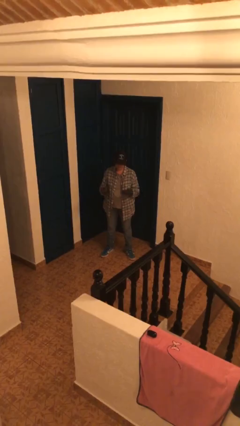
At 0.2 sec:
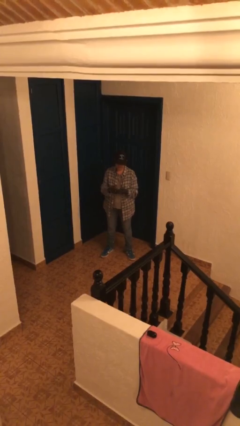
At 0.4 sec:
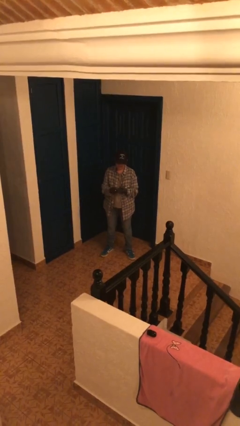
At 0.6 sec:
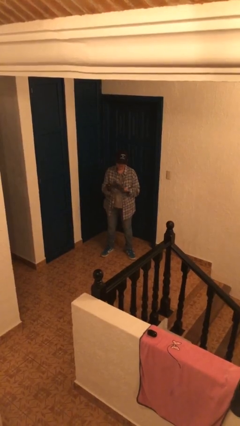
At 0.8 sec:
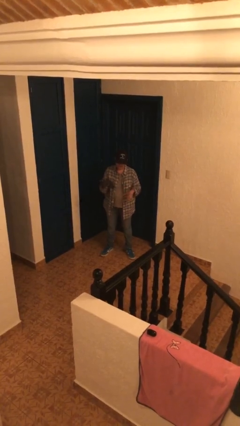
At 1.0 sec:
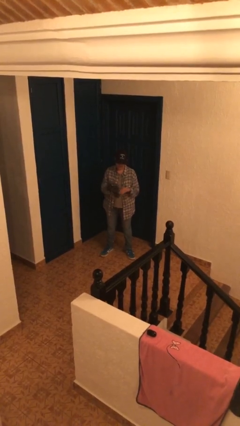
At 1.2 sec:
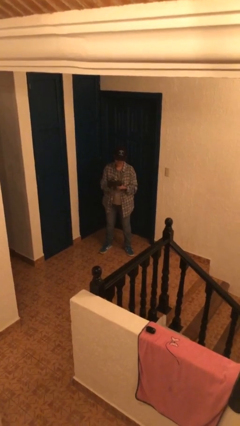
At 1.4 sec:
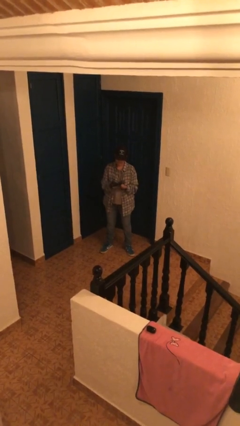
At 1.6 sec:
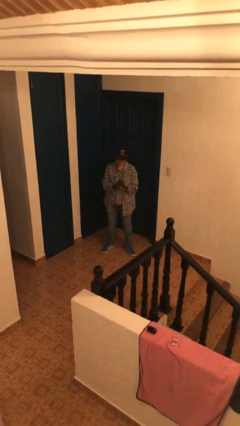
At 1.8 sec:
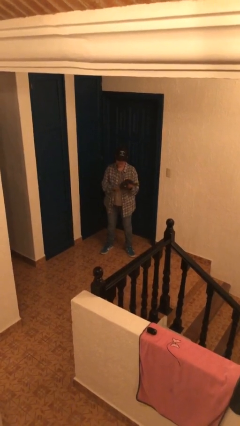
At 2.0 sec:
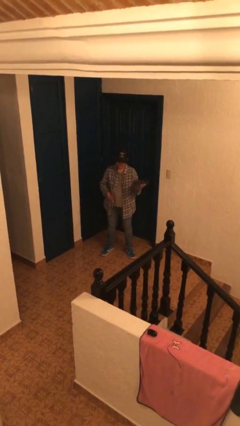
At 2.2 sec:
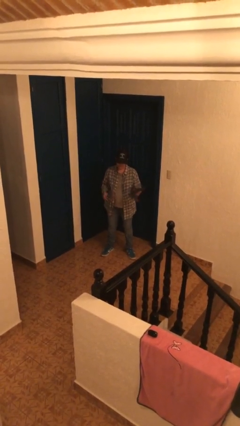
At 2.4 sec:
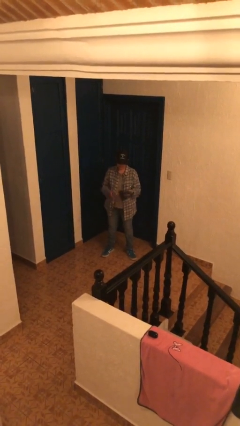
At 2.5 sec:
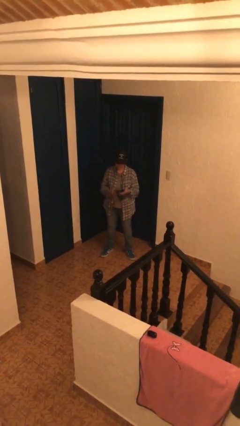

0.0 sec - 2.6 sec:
person takes off gloves

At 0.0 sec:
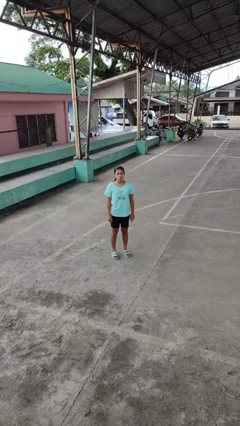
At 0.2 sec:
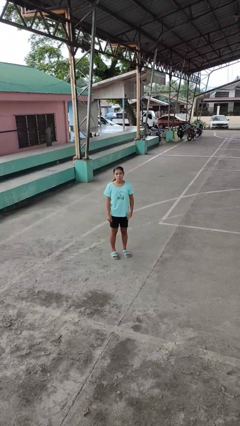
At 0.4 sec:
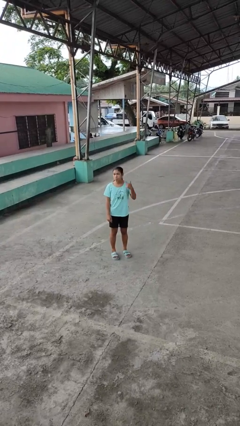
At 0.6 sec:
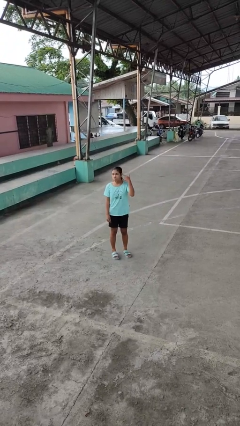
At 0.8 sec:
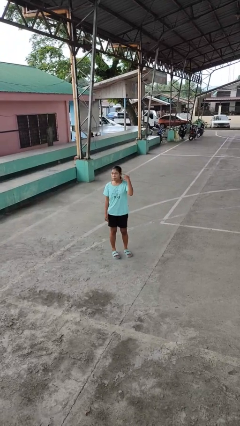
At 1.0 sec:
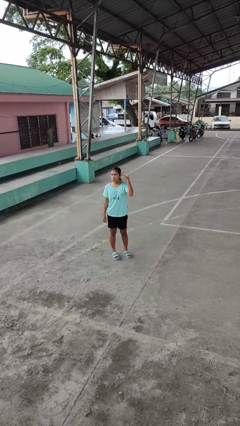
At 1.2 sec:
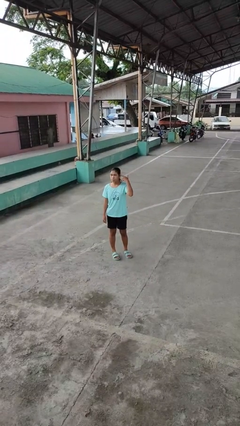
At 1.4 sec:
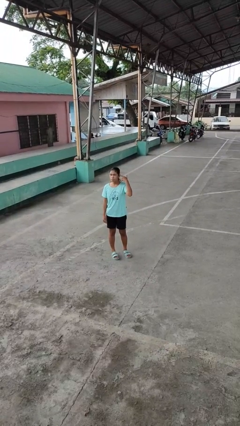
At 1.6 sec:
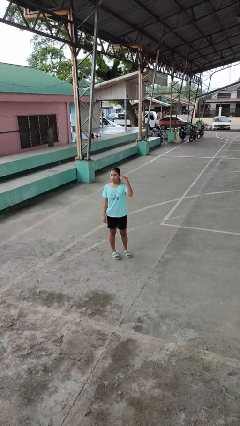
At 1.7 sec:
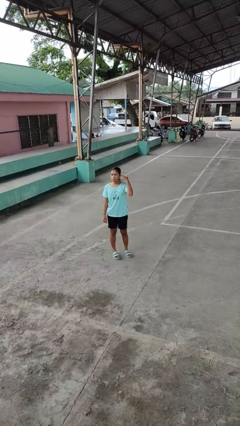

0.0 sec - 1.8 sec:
person gestures listen closely

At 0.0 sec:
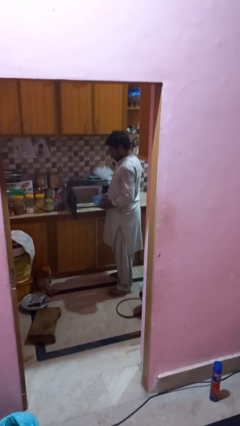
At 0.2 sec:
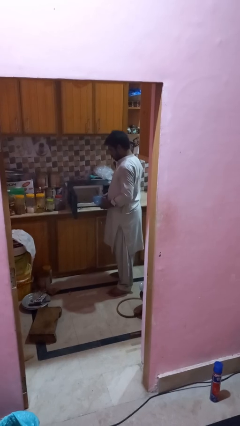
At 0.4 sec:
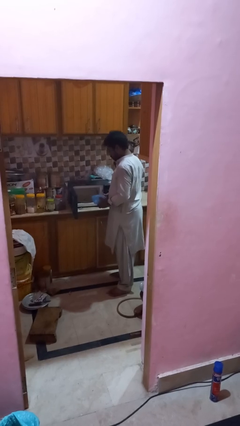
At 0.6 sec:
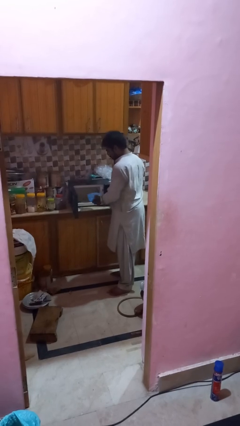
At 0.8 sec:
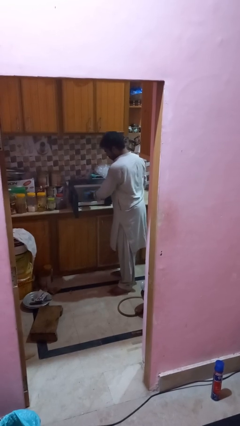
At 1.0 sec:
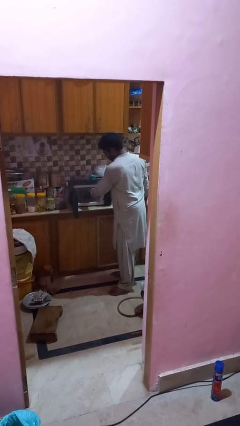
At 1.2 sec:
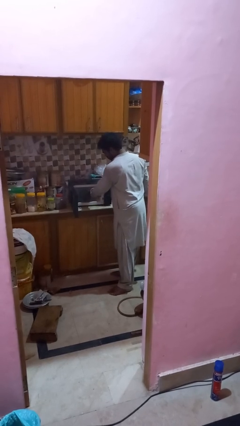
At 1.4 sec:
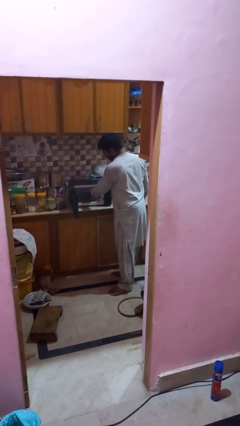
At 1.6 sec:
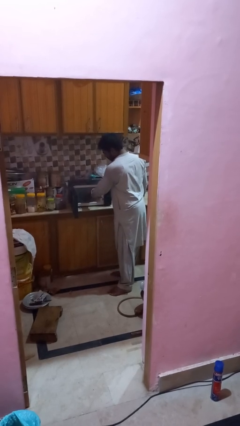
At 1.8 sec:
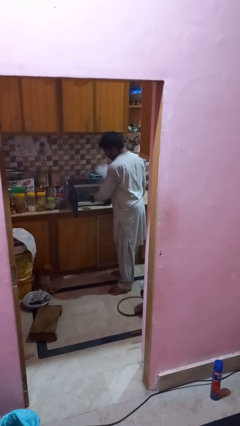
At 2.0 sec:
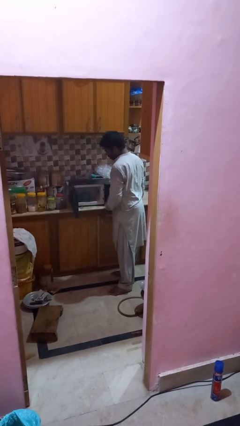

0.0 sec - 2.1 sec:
person puts object into microwave

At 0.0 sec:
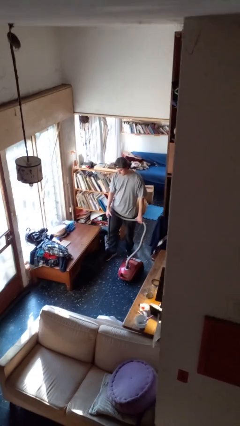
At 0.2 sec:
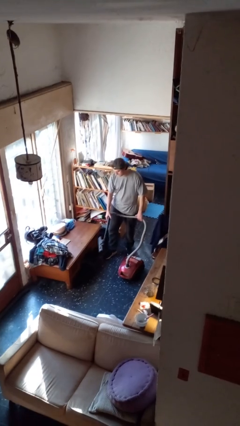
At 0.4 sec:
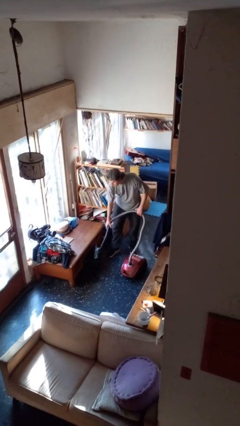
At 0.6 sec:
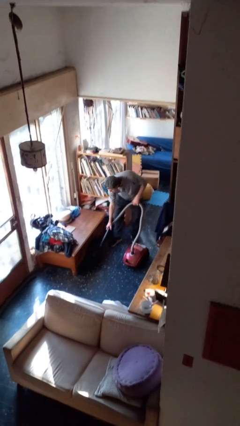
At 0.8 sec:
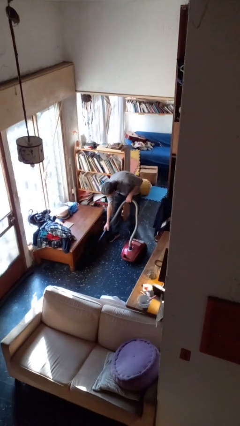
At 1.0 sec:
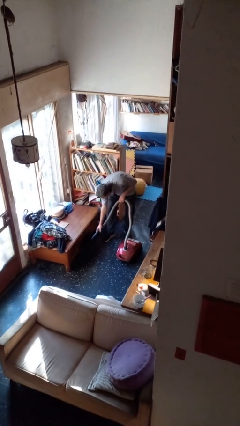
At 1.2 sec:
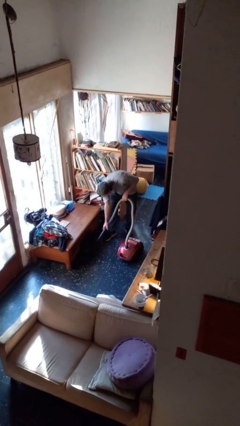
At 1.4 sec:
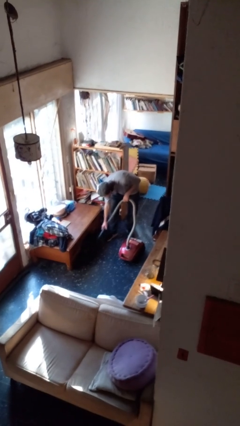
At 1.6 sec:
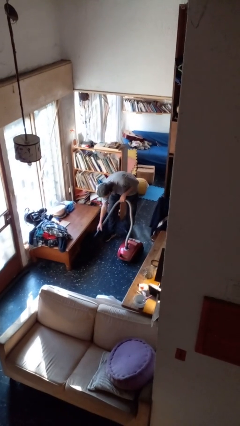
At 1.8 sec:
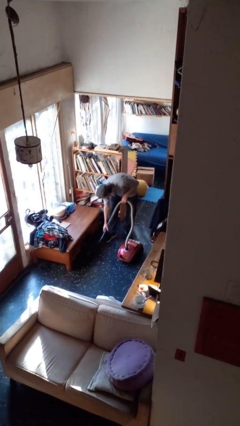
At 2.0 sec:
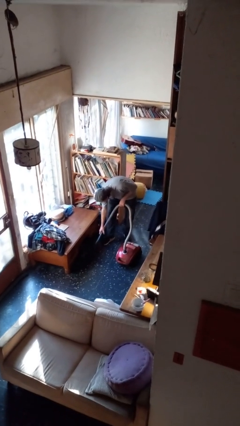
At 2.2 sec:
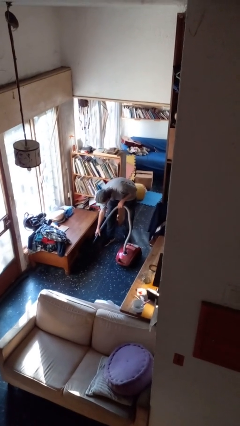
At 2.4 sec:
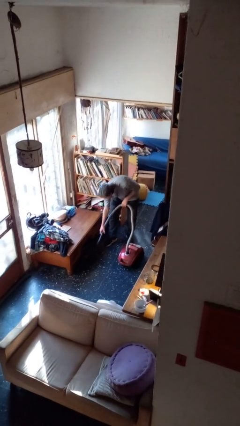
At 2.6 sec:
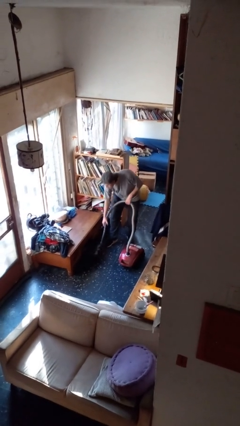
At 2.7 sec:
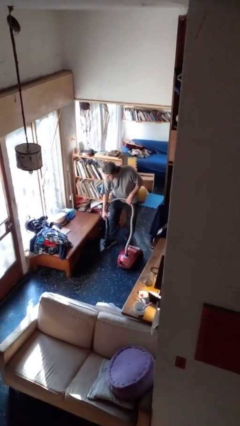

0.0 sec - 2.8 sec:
person vacuums carpet

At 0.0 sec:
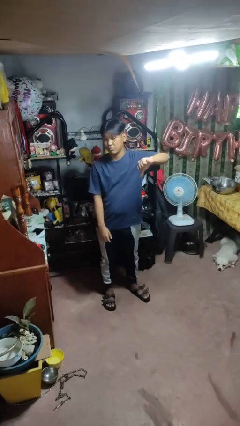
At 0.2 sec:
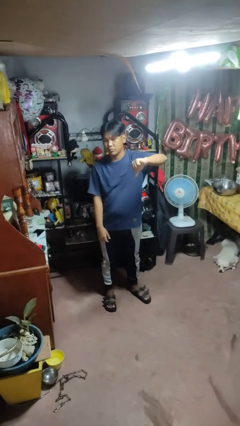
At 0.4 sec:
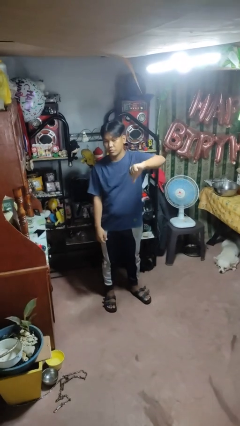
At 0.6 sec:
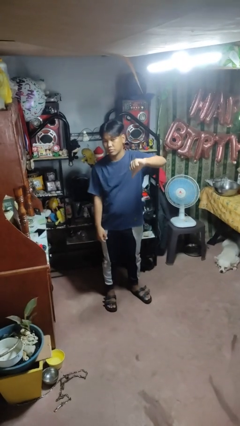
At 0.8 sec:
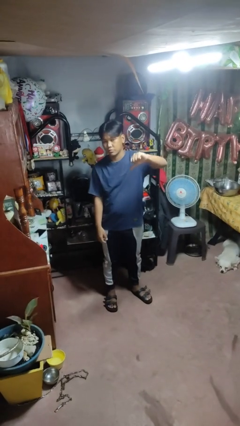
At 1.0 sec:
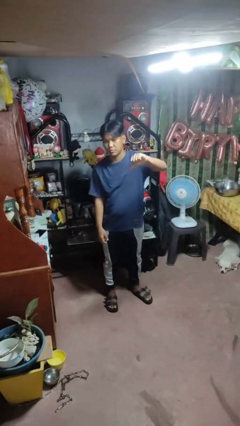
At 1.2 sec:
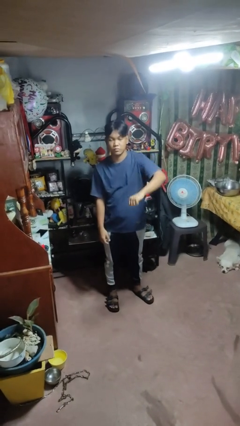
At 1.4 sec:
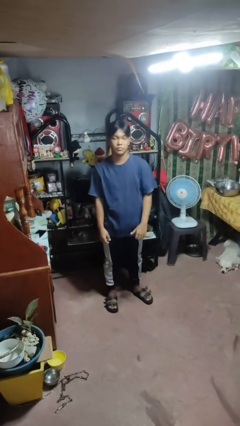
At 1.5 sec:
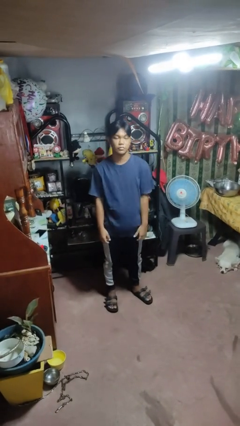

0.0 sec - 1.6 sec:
person gestures thumbs down

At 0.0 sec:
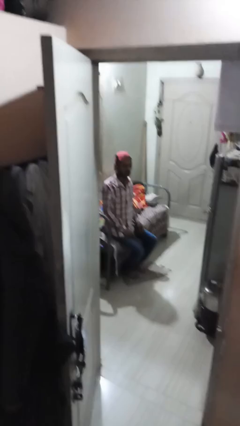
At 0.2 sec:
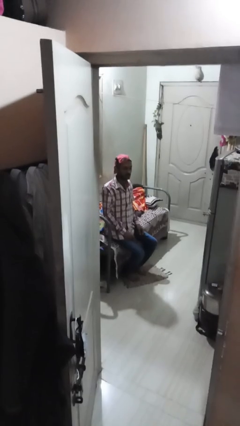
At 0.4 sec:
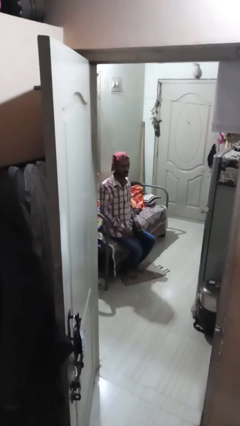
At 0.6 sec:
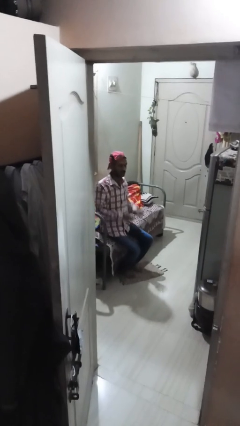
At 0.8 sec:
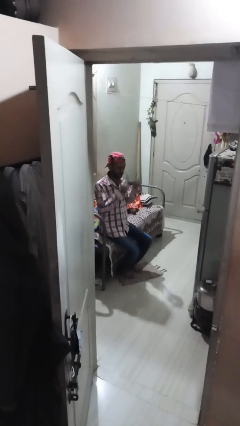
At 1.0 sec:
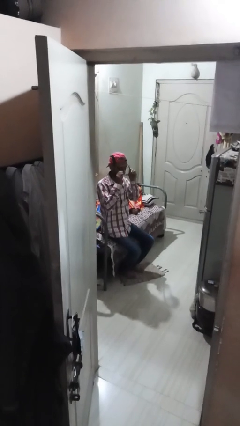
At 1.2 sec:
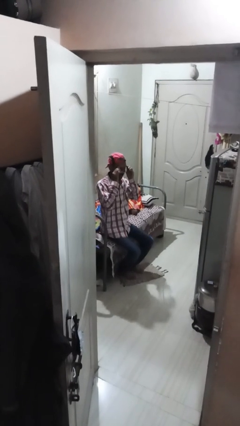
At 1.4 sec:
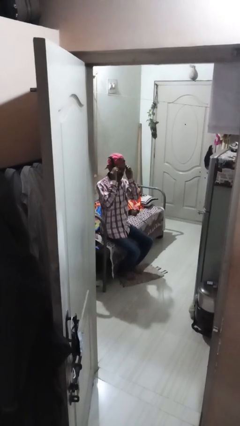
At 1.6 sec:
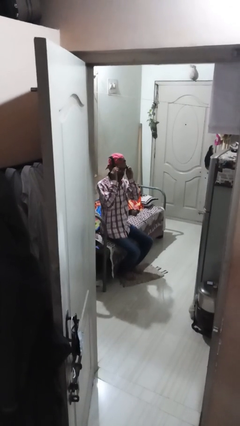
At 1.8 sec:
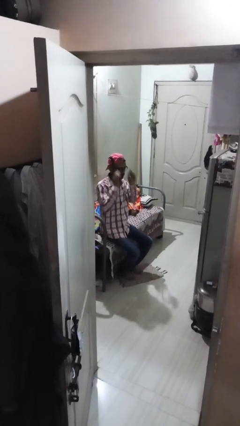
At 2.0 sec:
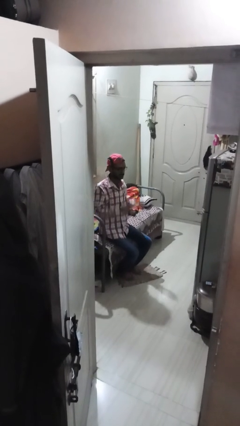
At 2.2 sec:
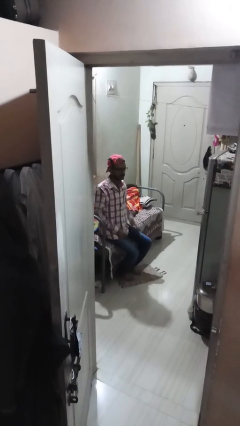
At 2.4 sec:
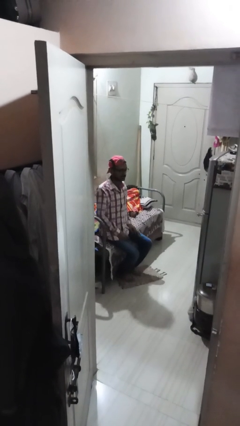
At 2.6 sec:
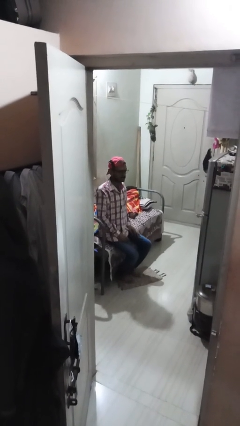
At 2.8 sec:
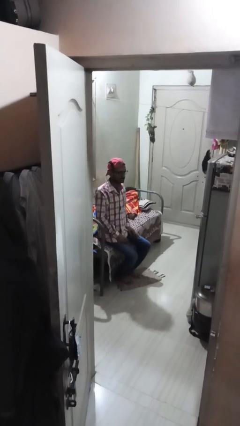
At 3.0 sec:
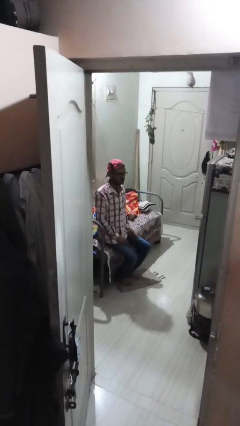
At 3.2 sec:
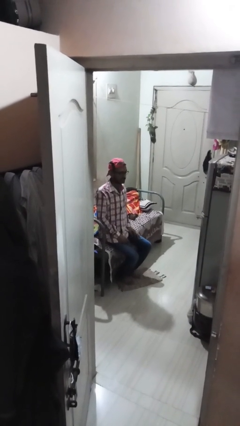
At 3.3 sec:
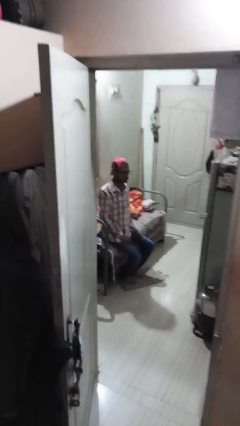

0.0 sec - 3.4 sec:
person puts on glasses

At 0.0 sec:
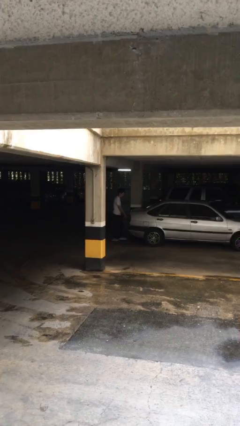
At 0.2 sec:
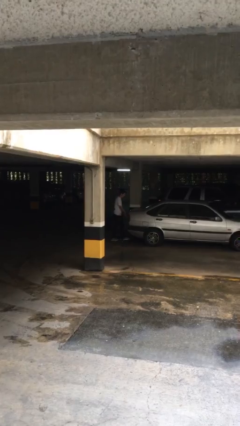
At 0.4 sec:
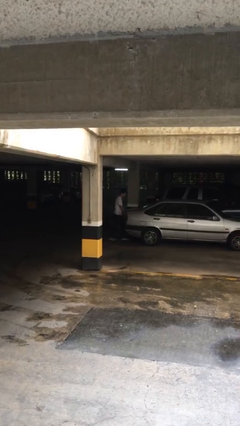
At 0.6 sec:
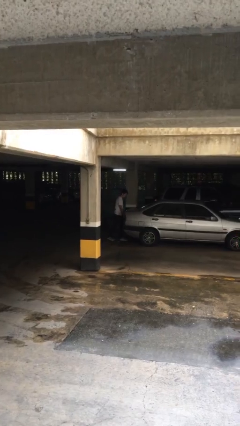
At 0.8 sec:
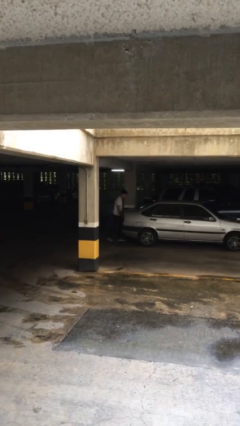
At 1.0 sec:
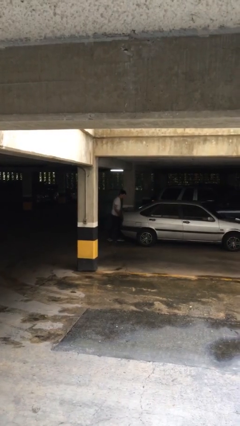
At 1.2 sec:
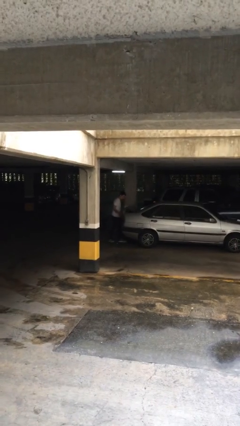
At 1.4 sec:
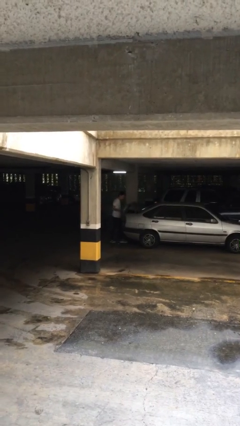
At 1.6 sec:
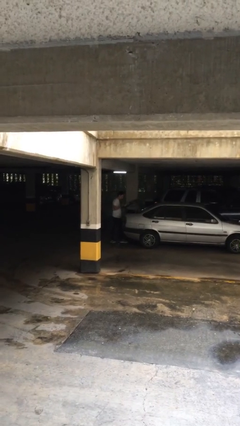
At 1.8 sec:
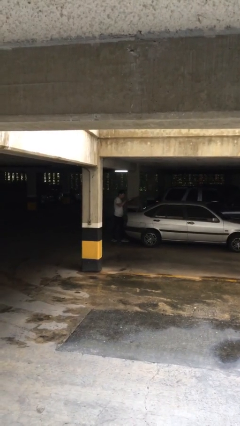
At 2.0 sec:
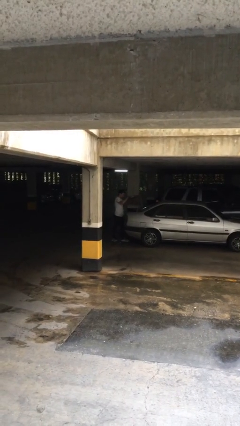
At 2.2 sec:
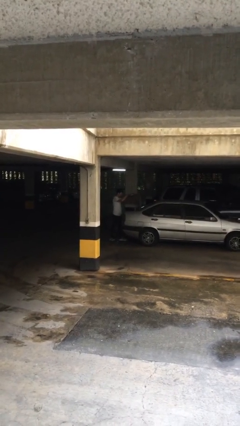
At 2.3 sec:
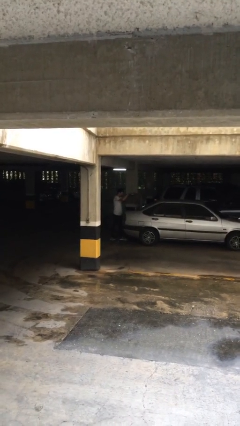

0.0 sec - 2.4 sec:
person opens car trunk

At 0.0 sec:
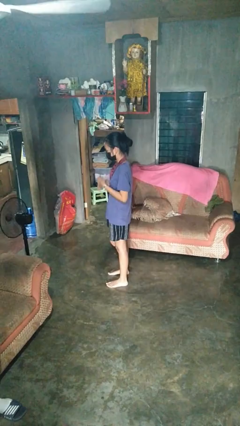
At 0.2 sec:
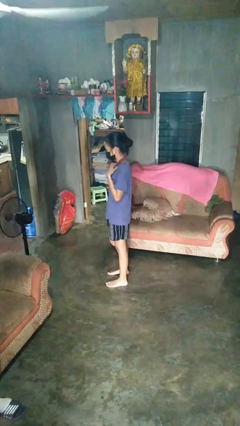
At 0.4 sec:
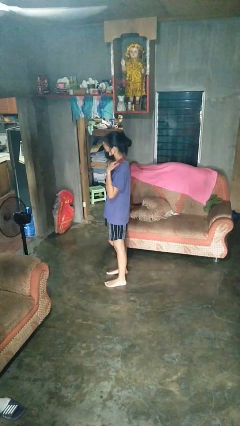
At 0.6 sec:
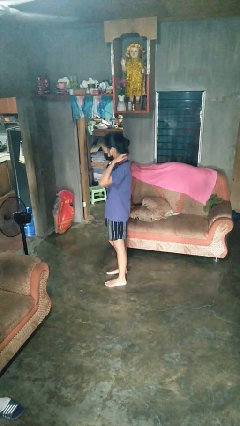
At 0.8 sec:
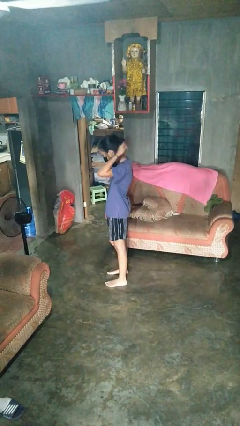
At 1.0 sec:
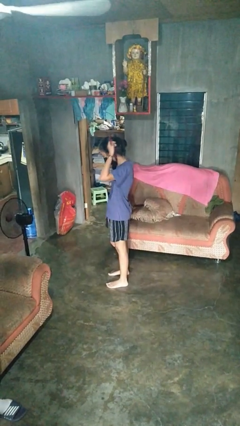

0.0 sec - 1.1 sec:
person takes off necklace
